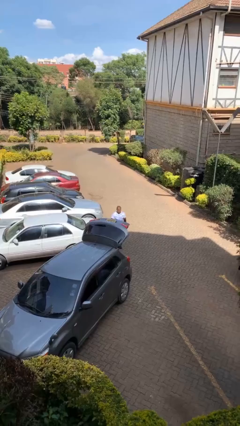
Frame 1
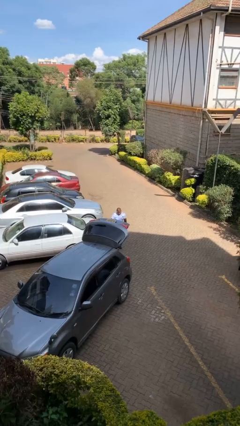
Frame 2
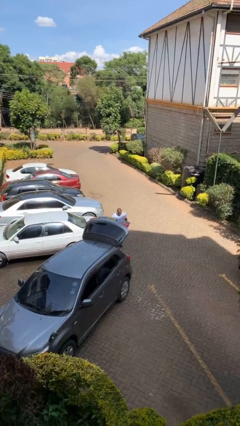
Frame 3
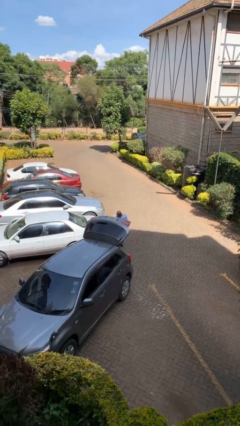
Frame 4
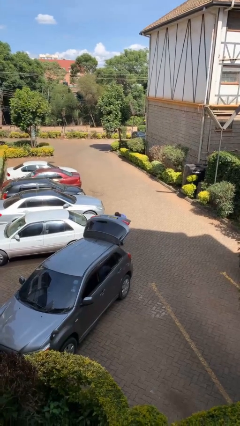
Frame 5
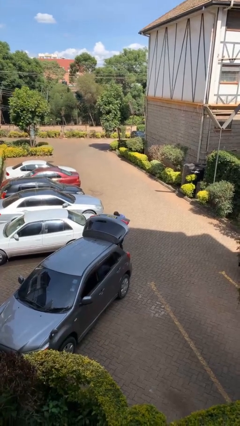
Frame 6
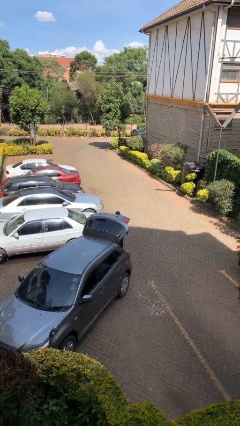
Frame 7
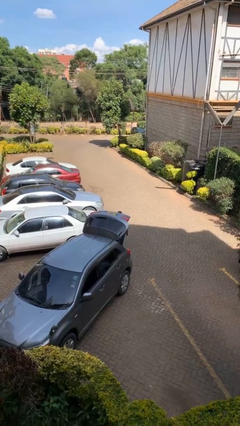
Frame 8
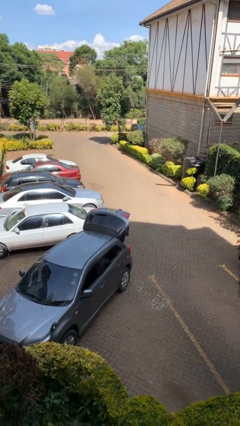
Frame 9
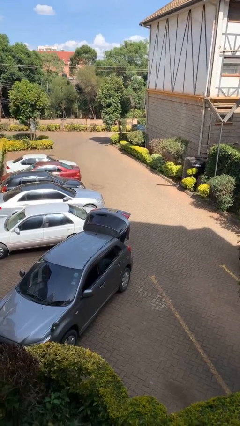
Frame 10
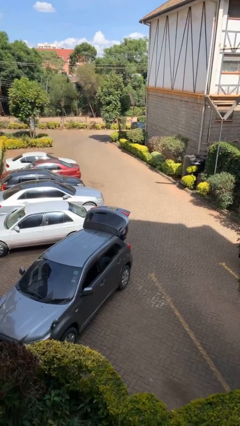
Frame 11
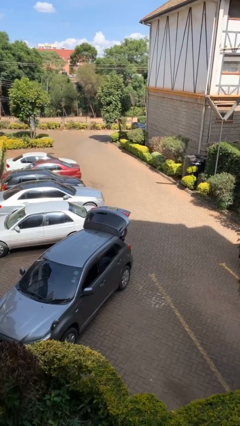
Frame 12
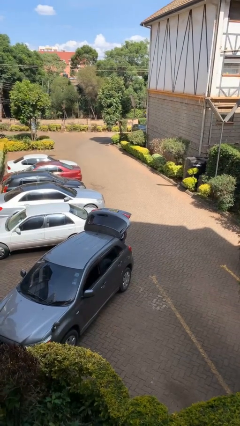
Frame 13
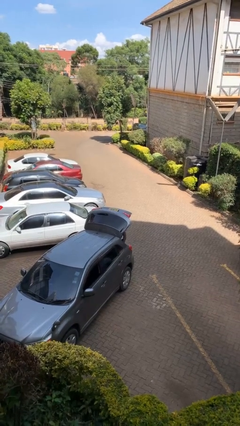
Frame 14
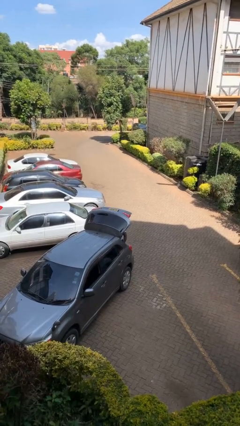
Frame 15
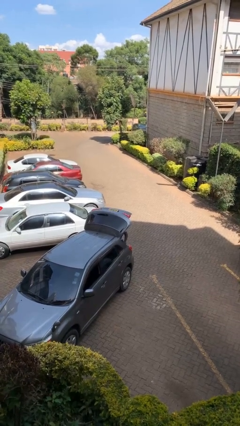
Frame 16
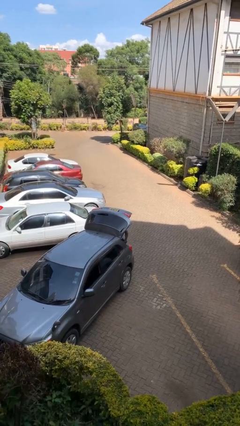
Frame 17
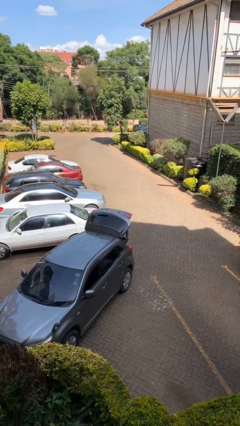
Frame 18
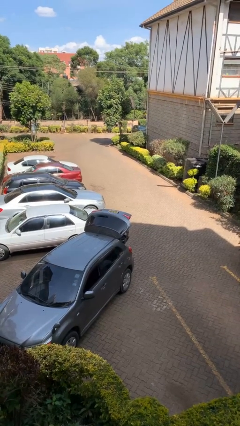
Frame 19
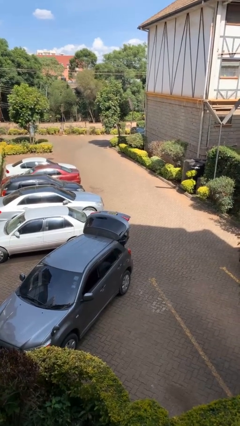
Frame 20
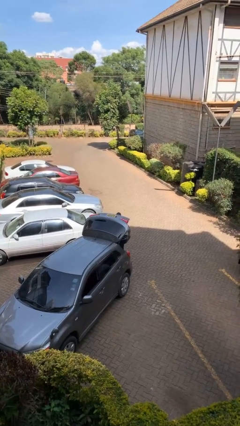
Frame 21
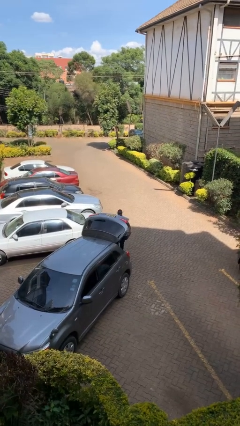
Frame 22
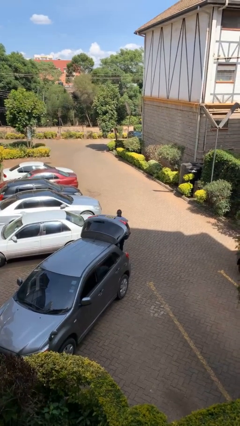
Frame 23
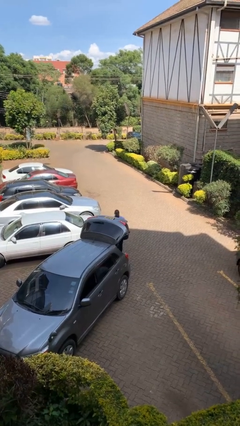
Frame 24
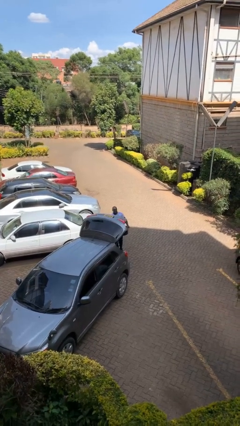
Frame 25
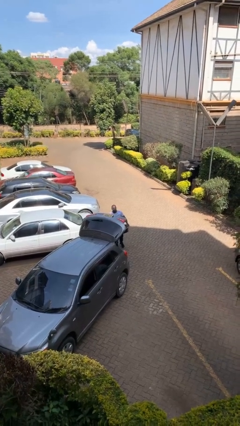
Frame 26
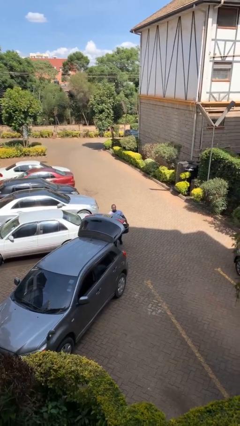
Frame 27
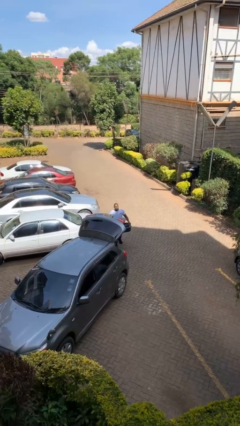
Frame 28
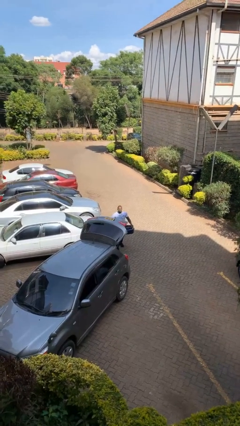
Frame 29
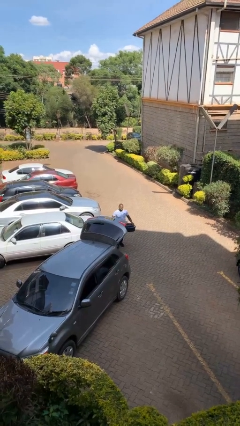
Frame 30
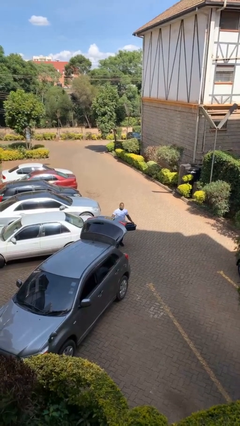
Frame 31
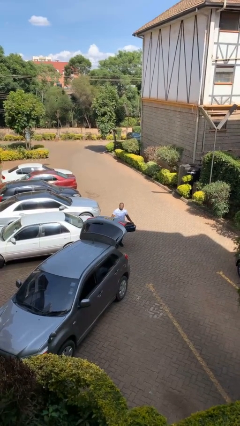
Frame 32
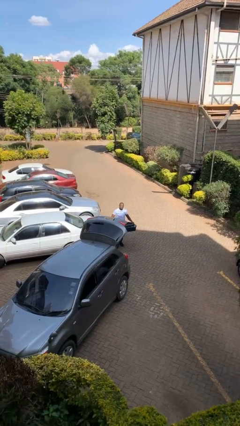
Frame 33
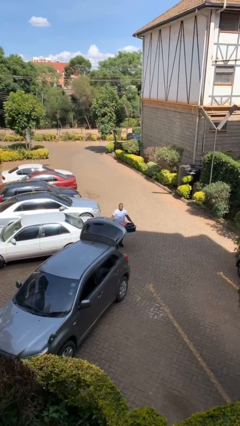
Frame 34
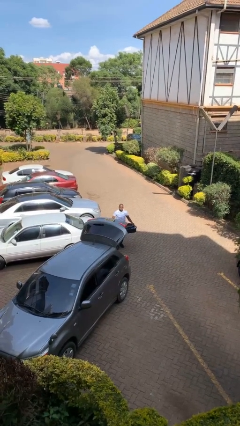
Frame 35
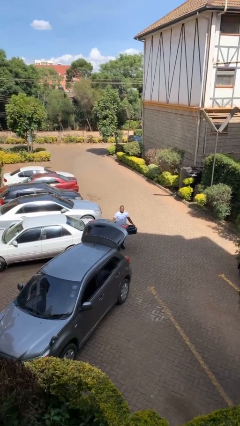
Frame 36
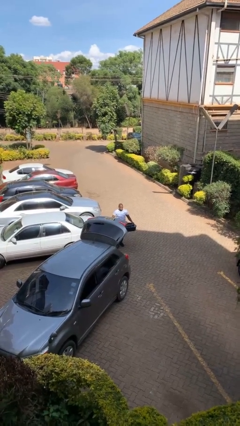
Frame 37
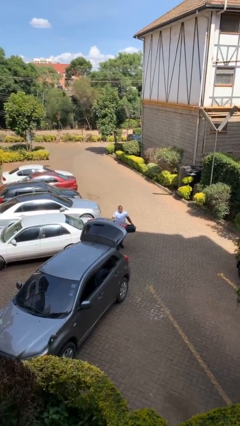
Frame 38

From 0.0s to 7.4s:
person unloads car

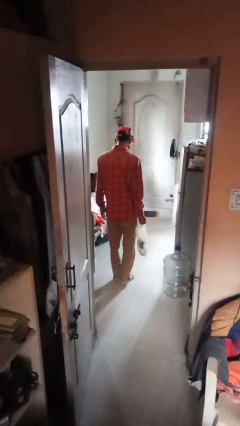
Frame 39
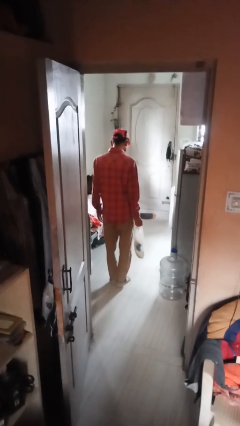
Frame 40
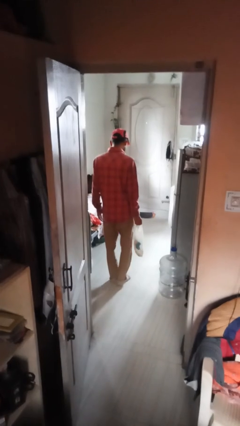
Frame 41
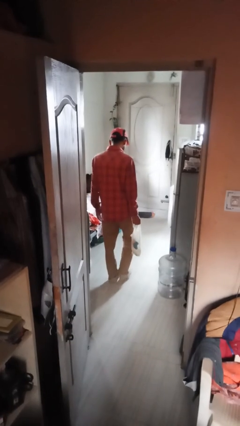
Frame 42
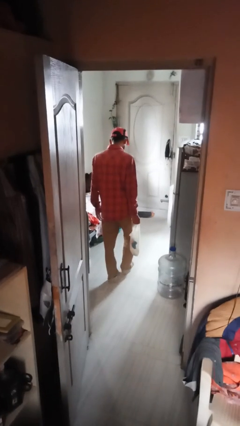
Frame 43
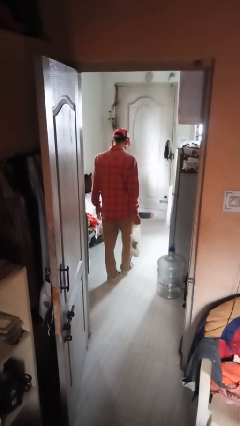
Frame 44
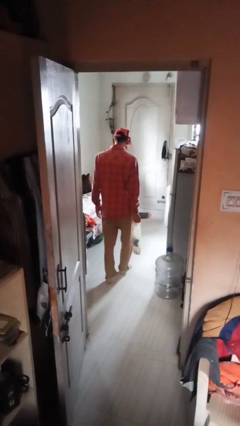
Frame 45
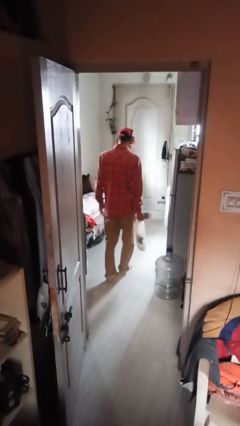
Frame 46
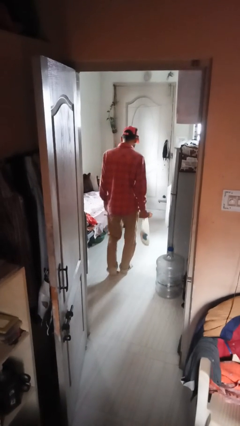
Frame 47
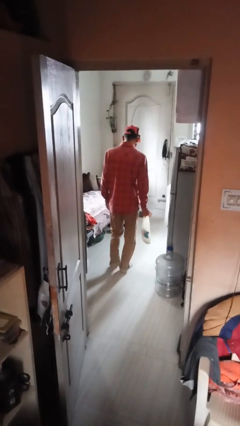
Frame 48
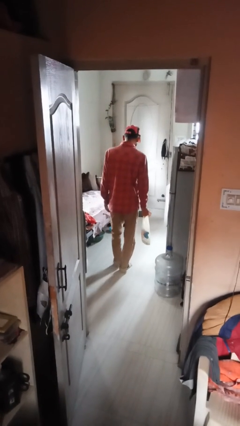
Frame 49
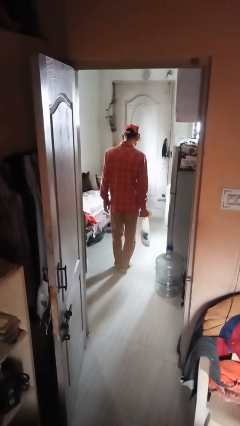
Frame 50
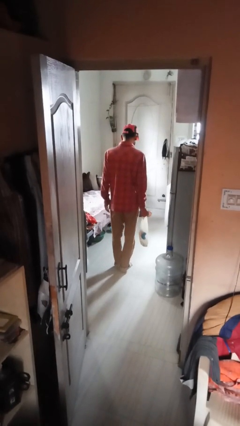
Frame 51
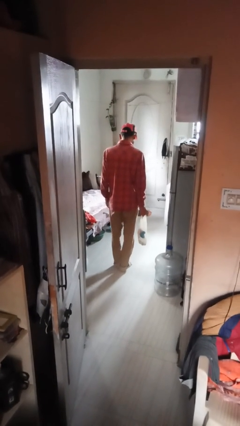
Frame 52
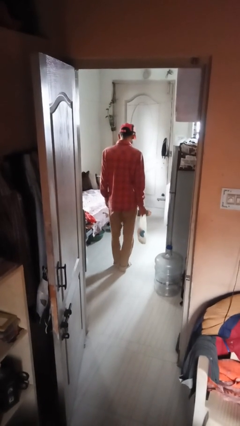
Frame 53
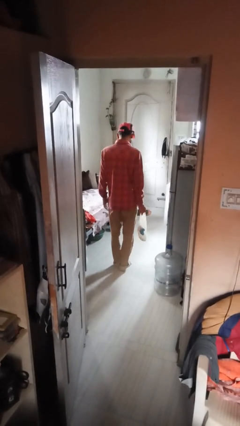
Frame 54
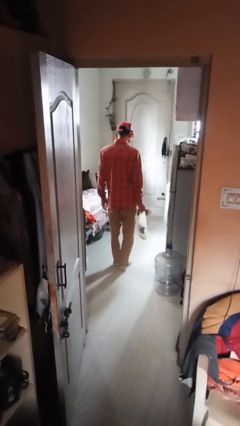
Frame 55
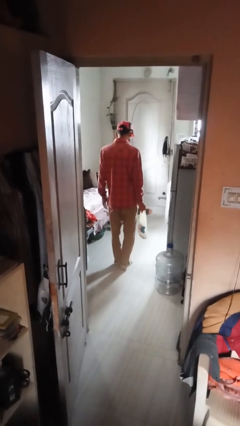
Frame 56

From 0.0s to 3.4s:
person carries groceries

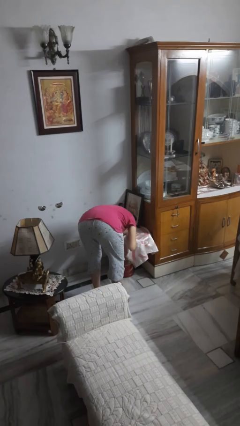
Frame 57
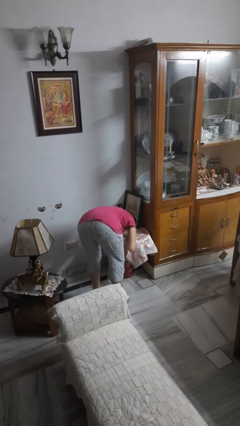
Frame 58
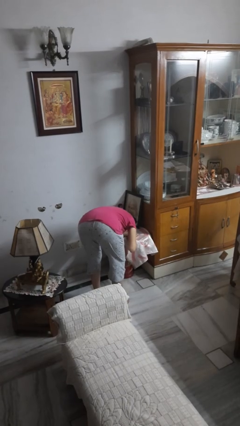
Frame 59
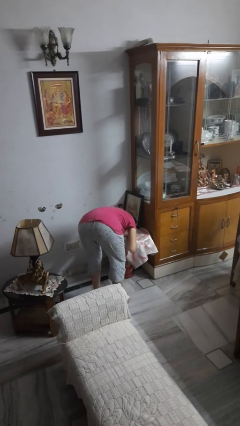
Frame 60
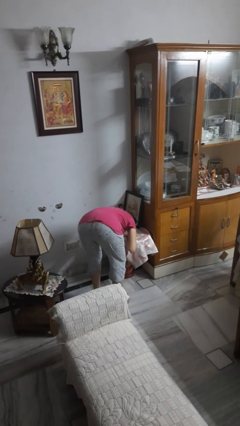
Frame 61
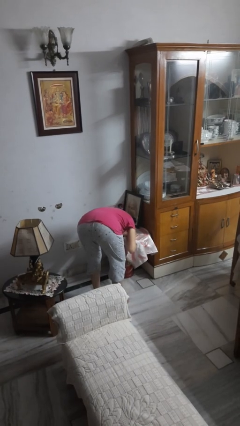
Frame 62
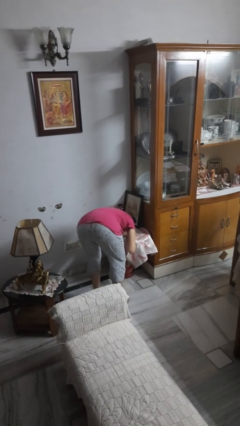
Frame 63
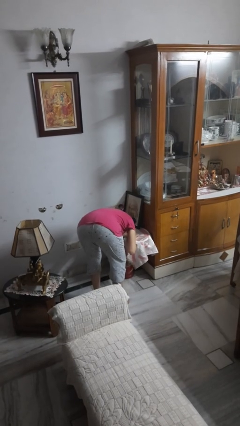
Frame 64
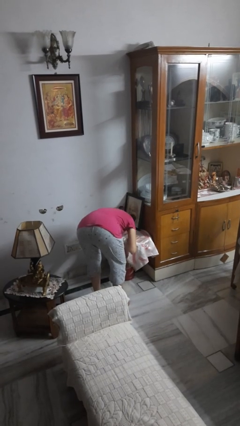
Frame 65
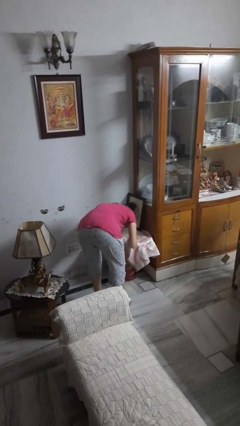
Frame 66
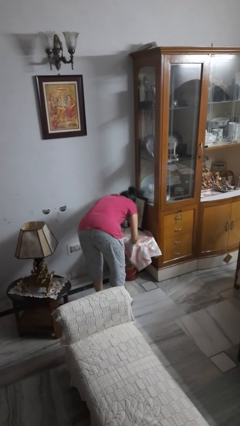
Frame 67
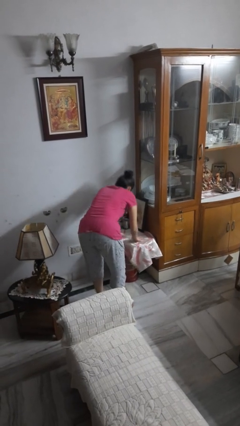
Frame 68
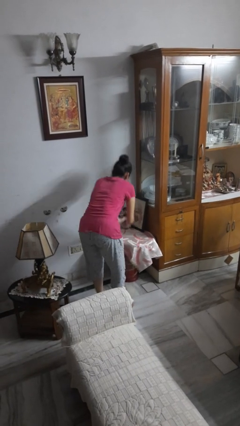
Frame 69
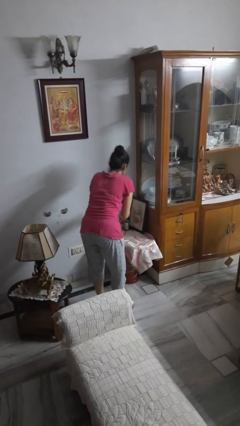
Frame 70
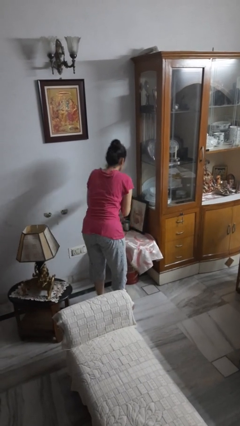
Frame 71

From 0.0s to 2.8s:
person prays

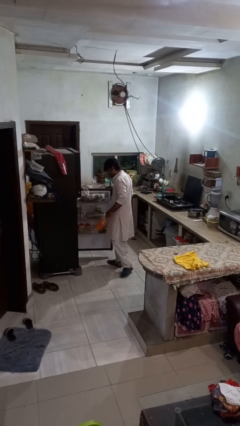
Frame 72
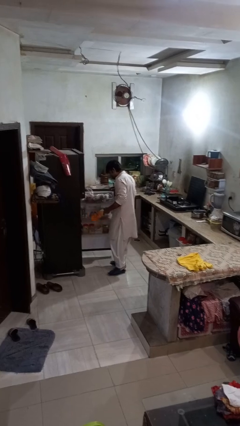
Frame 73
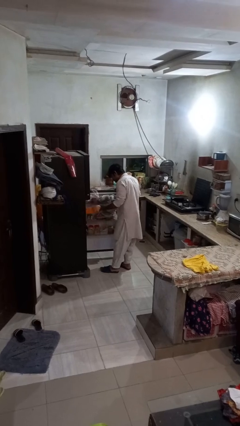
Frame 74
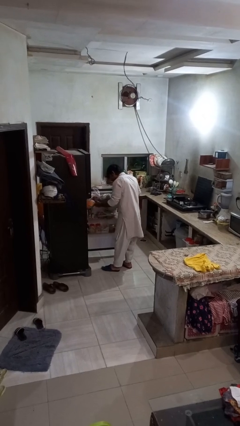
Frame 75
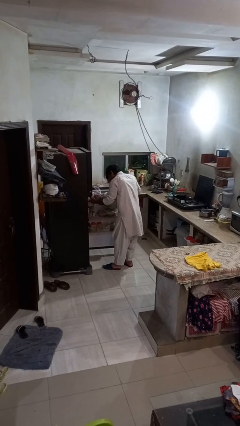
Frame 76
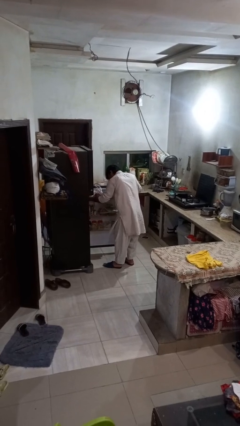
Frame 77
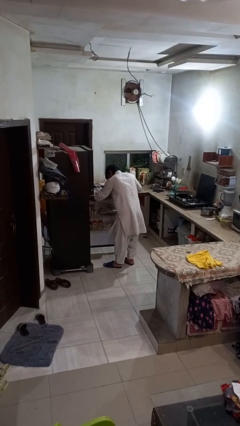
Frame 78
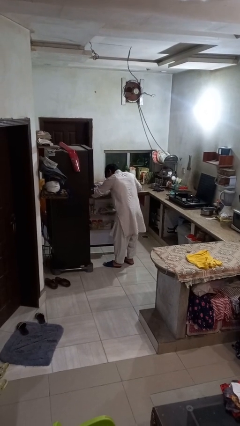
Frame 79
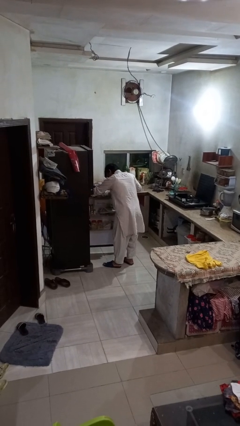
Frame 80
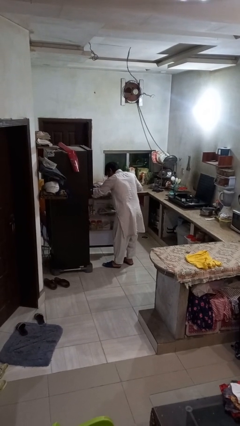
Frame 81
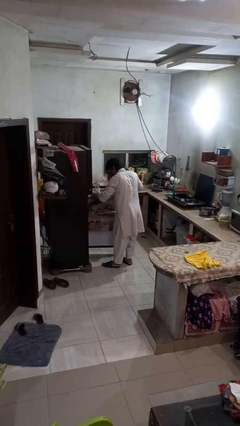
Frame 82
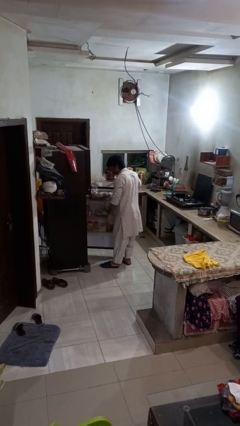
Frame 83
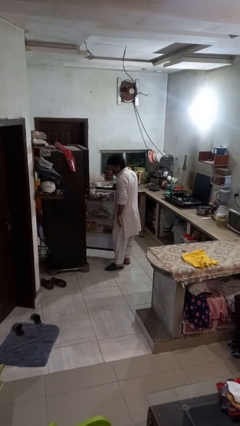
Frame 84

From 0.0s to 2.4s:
person puts object into refrigerator

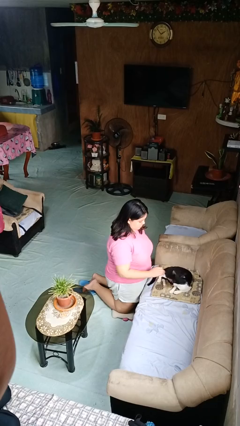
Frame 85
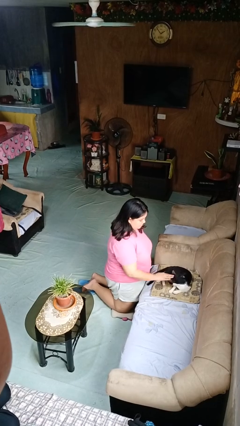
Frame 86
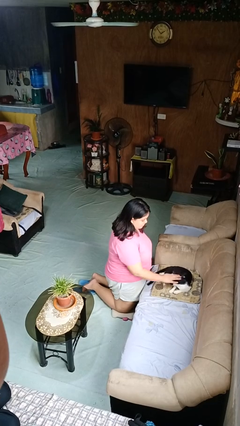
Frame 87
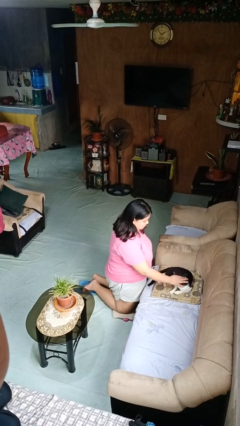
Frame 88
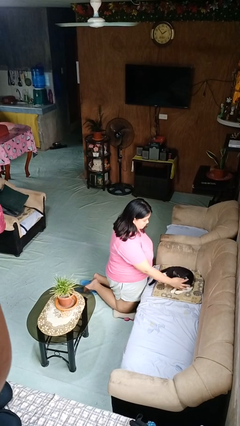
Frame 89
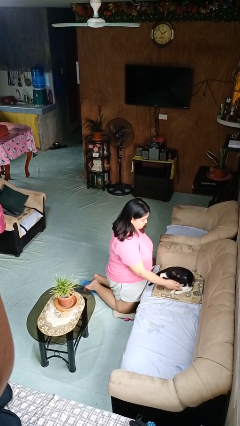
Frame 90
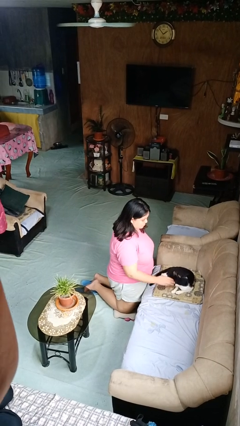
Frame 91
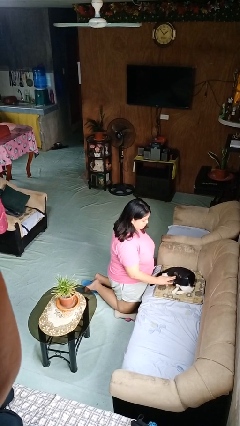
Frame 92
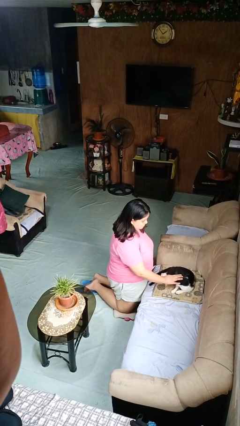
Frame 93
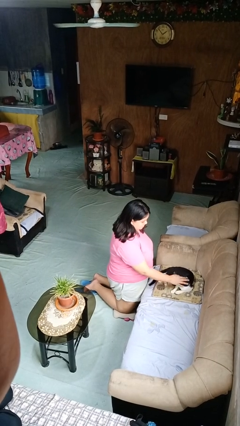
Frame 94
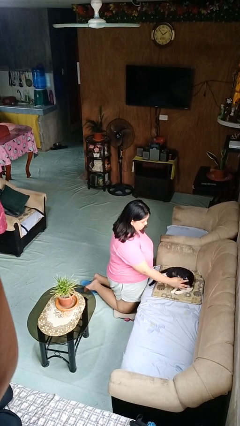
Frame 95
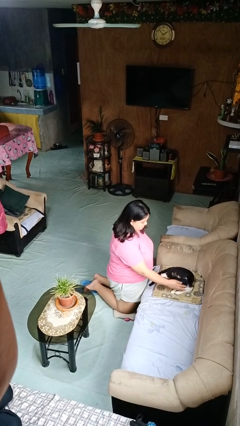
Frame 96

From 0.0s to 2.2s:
person pets cat
